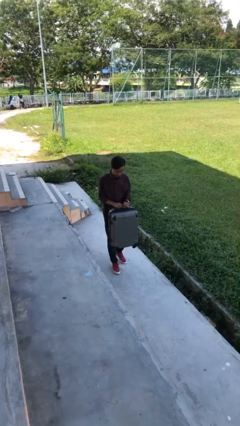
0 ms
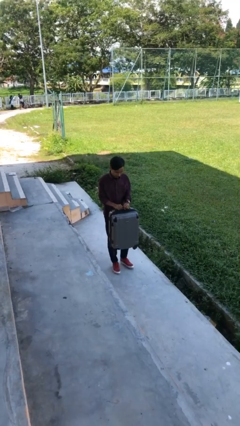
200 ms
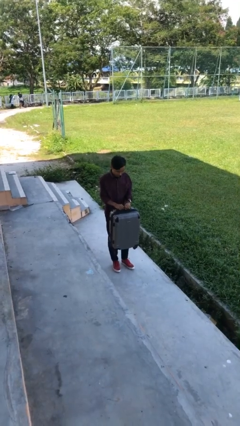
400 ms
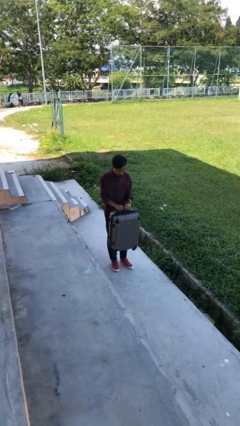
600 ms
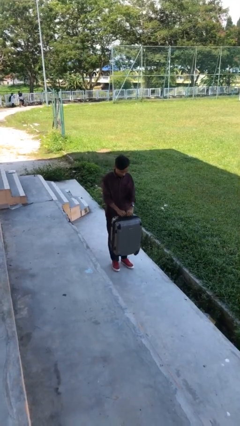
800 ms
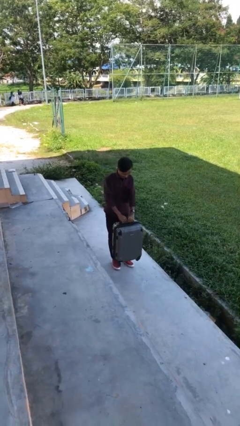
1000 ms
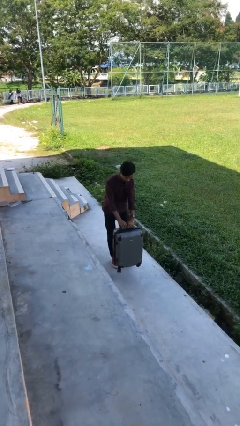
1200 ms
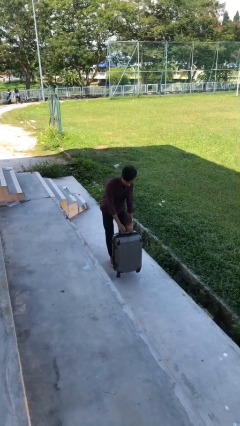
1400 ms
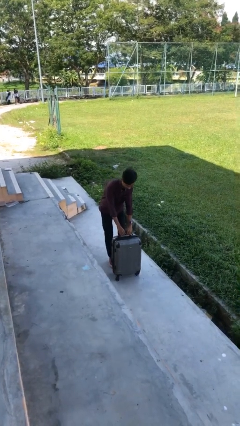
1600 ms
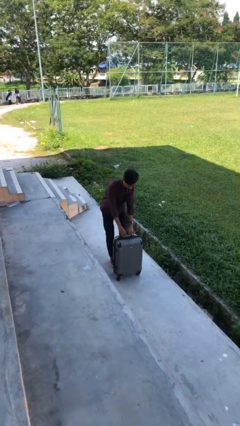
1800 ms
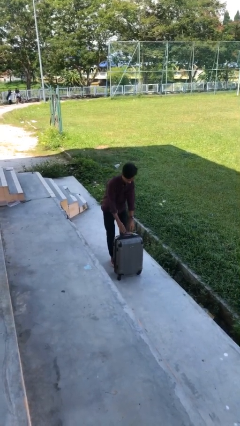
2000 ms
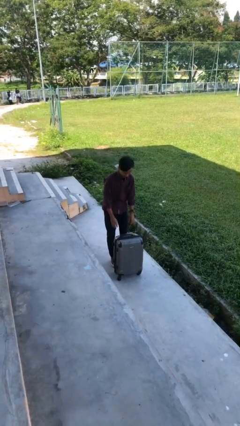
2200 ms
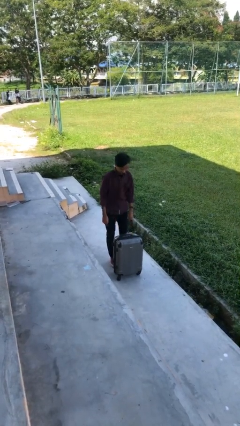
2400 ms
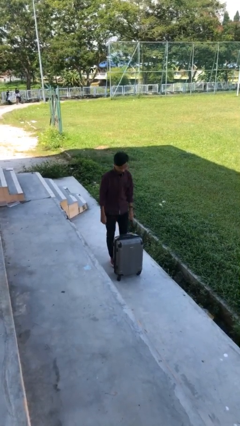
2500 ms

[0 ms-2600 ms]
person puts down object on floor

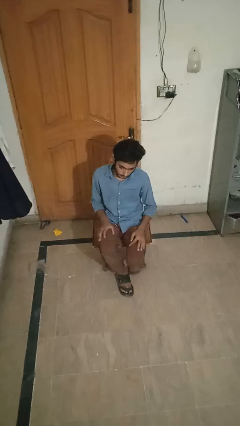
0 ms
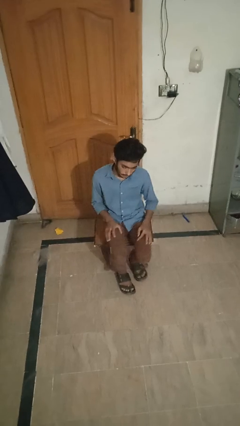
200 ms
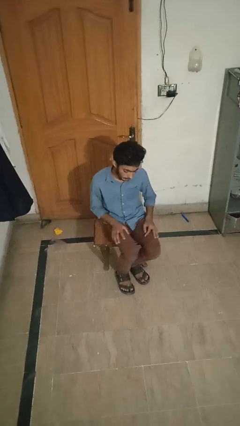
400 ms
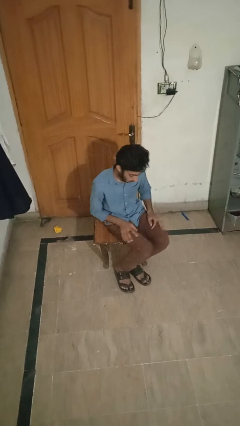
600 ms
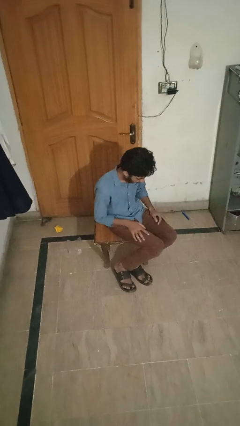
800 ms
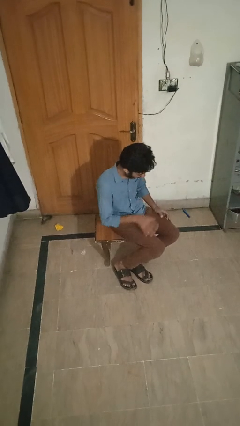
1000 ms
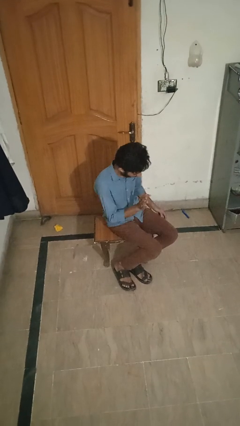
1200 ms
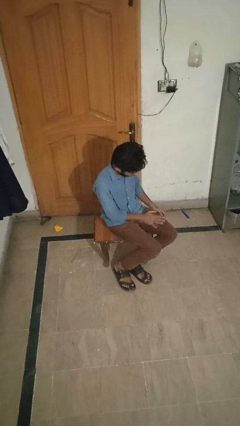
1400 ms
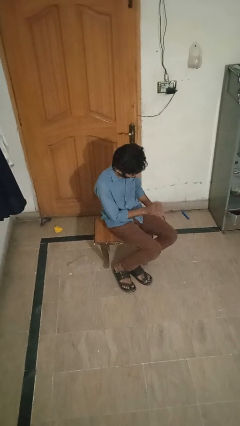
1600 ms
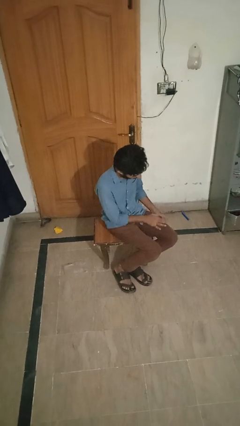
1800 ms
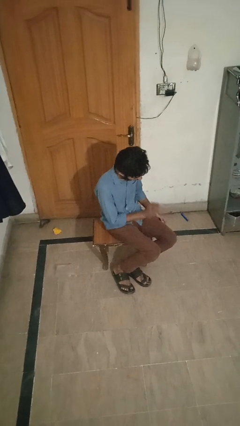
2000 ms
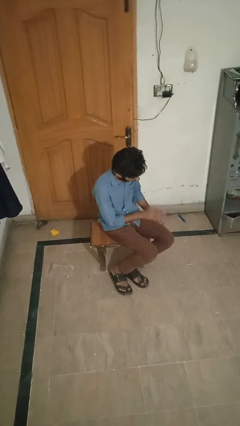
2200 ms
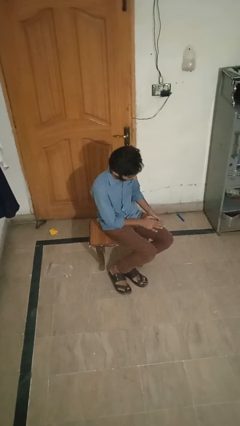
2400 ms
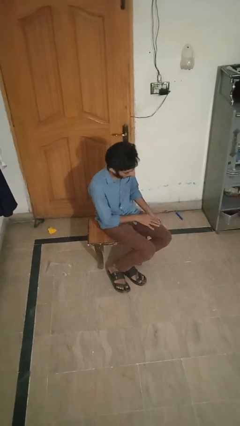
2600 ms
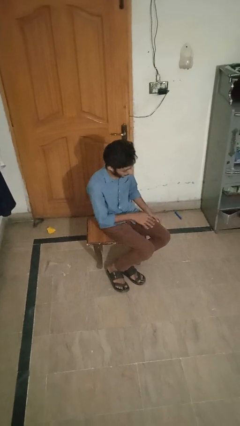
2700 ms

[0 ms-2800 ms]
person slaps hands on thighs

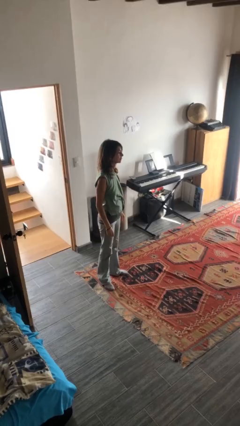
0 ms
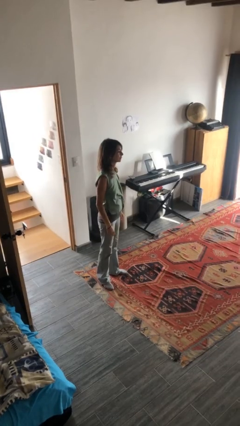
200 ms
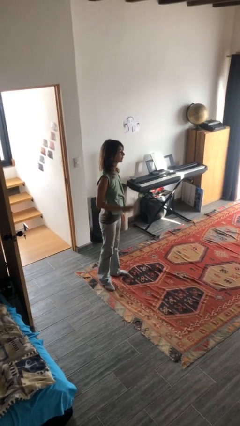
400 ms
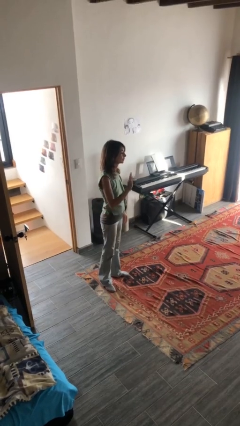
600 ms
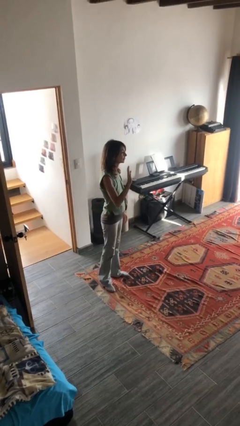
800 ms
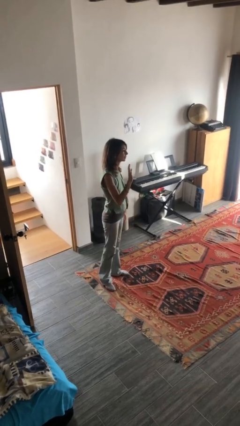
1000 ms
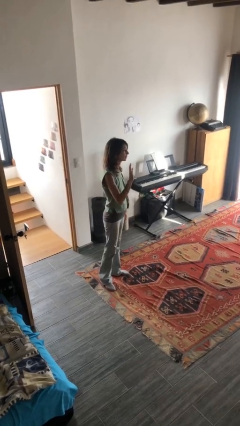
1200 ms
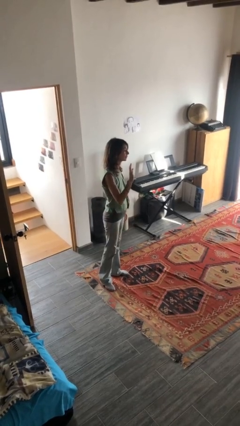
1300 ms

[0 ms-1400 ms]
person gestures raise hand

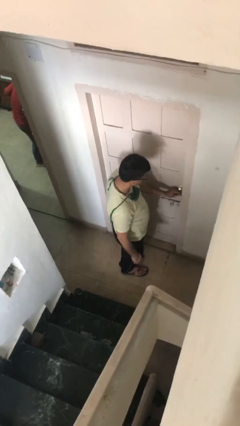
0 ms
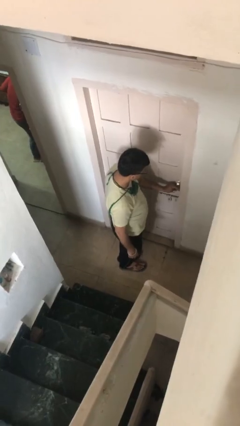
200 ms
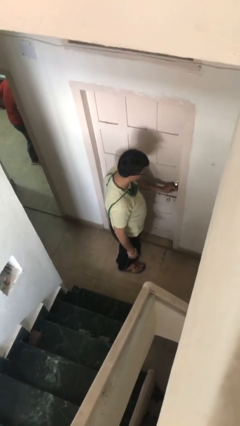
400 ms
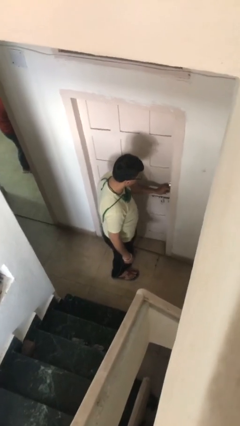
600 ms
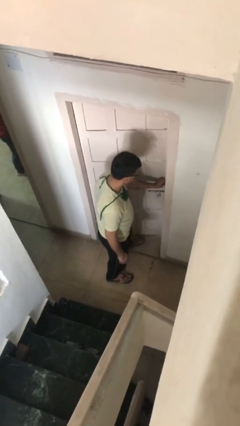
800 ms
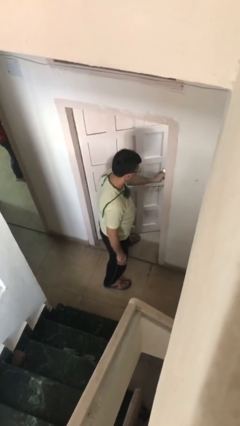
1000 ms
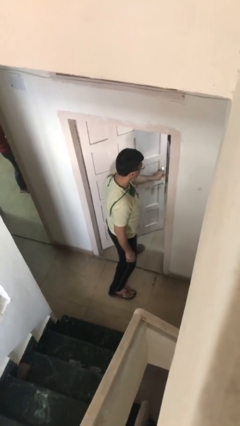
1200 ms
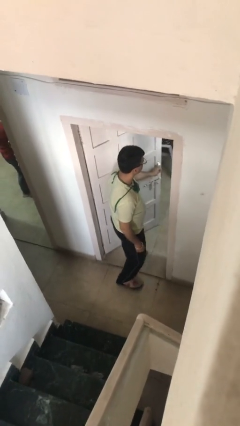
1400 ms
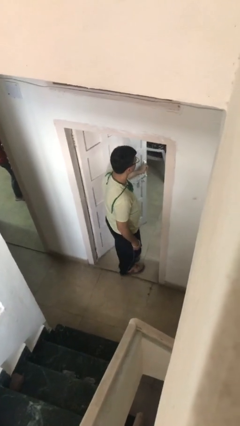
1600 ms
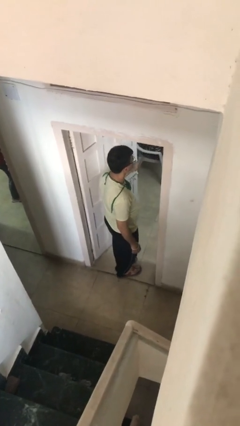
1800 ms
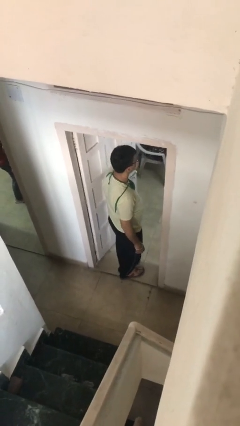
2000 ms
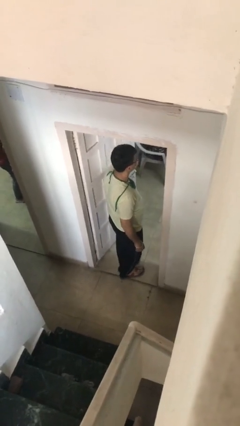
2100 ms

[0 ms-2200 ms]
person opens facility door

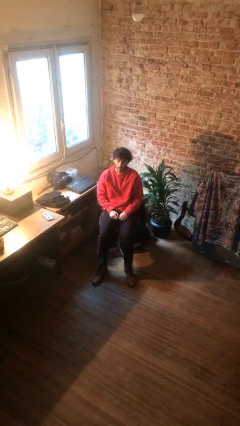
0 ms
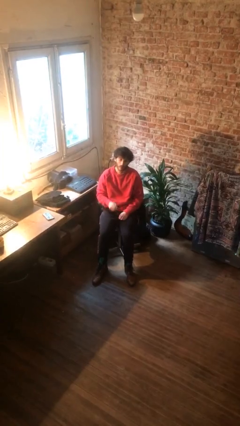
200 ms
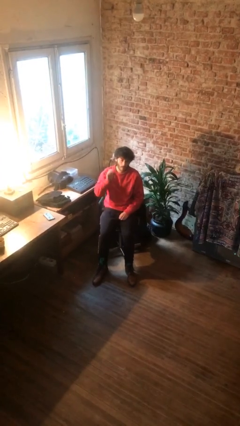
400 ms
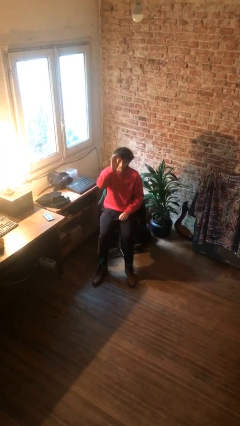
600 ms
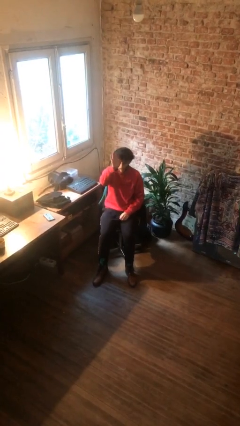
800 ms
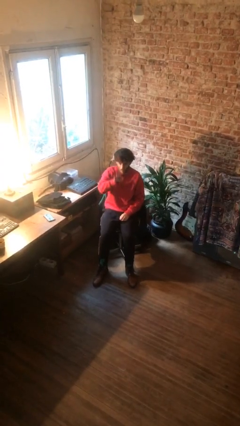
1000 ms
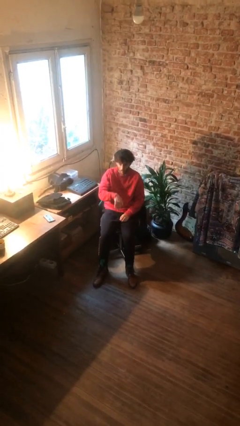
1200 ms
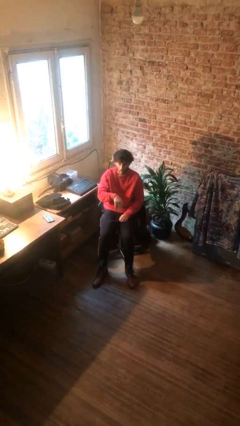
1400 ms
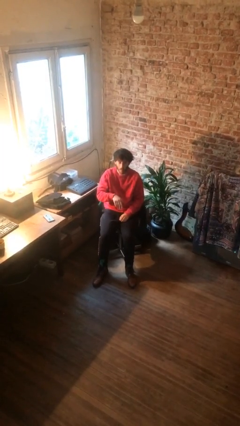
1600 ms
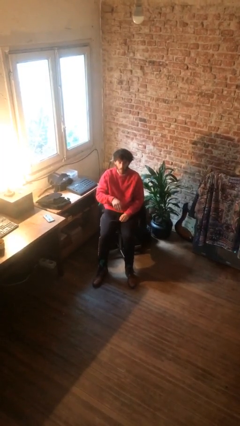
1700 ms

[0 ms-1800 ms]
person gestures swipe down

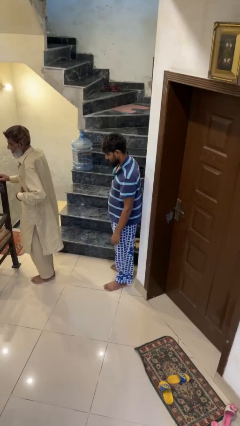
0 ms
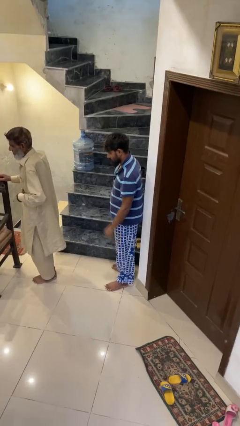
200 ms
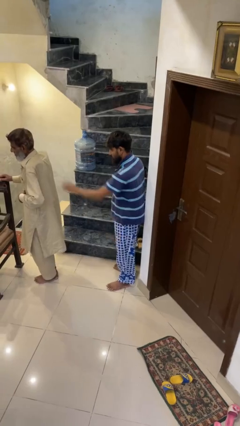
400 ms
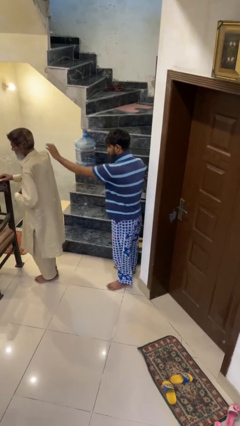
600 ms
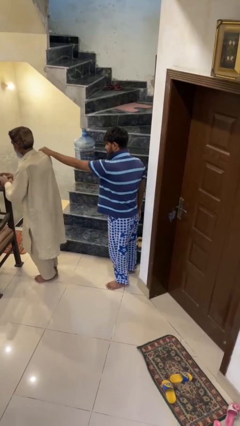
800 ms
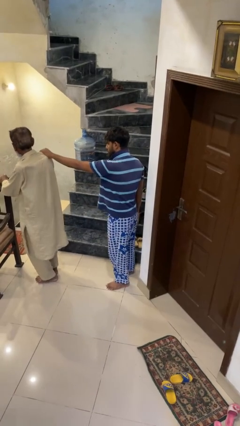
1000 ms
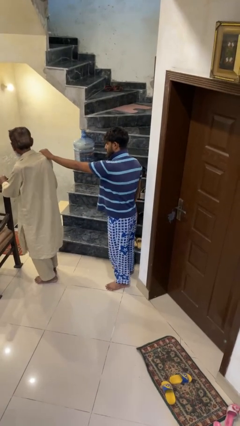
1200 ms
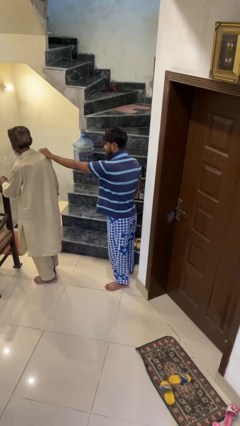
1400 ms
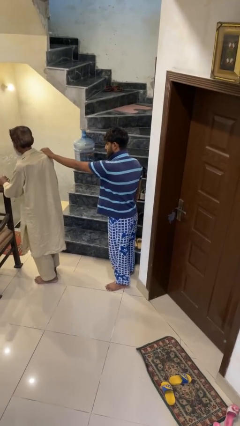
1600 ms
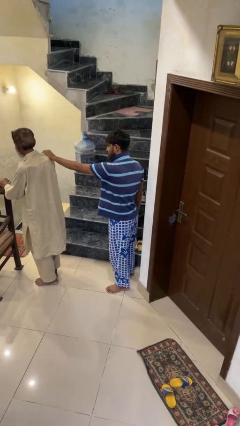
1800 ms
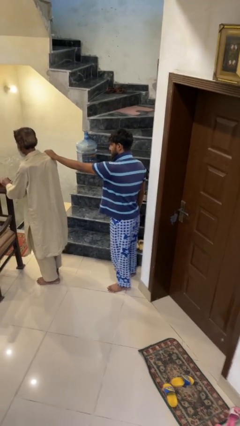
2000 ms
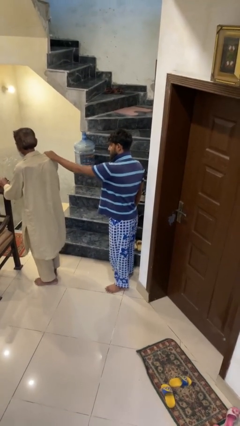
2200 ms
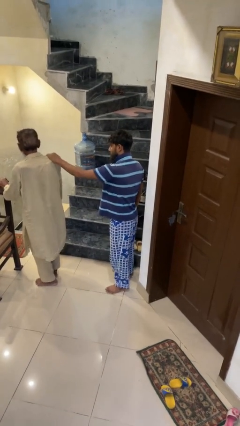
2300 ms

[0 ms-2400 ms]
person grabs person by shoulder

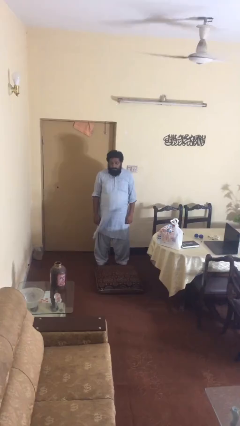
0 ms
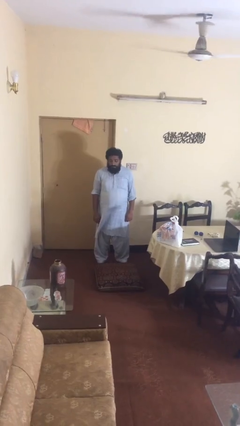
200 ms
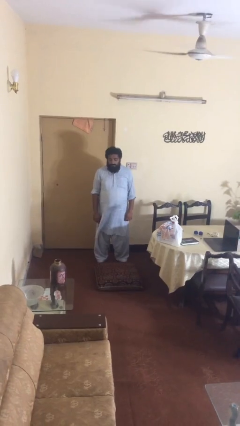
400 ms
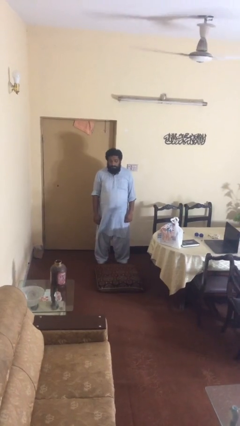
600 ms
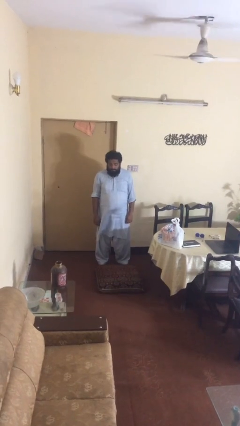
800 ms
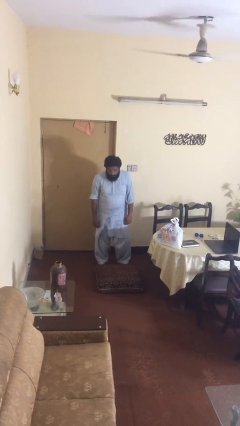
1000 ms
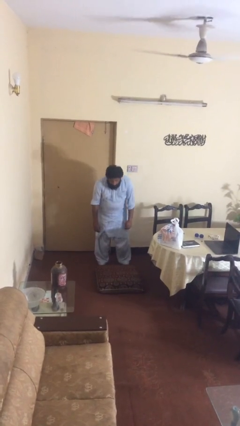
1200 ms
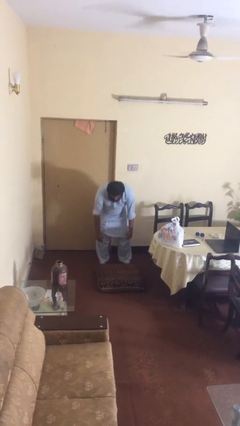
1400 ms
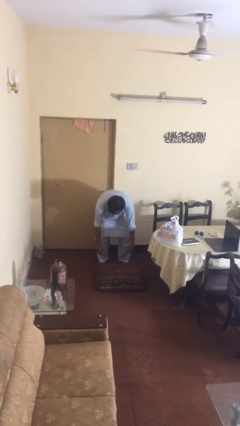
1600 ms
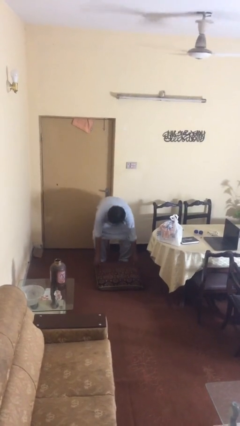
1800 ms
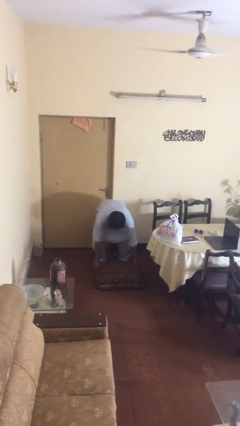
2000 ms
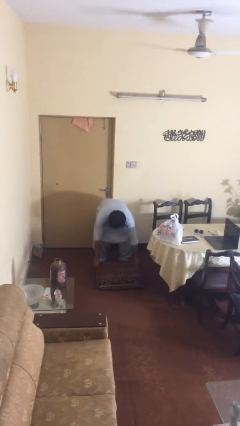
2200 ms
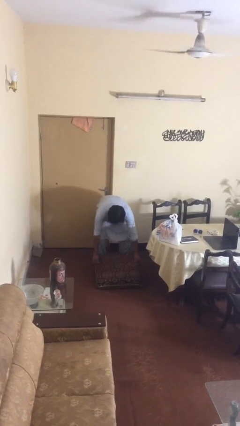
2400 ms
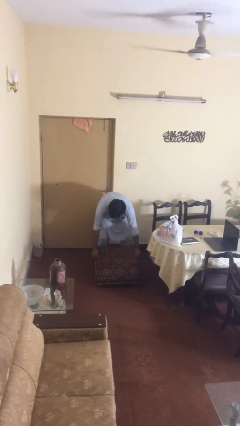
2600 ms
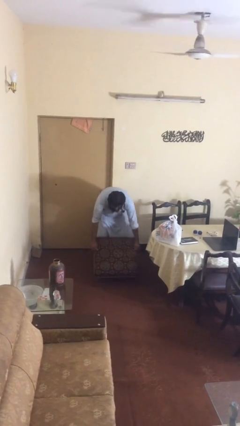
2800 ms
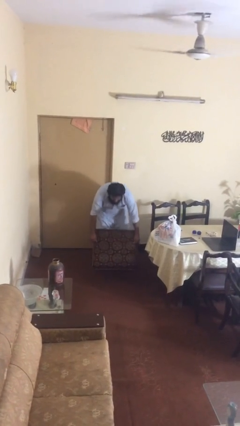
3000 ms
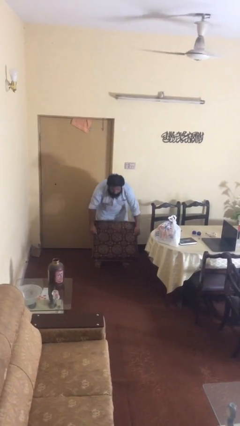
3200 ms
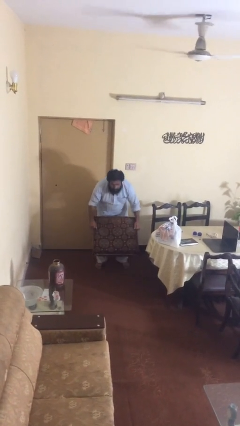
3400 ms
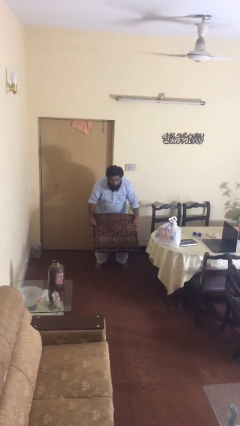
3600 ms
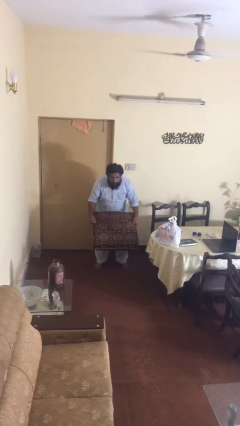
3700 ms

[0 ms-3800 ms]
person picks up object from floor
